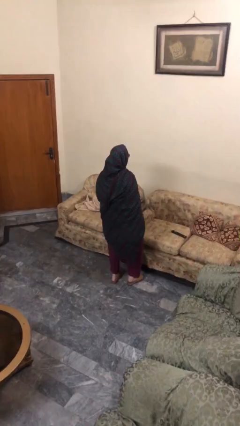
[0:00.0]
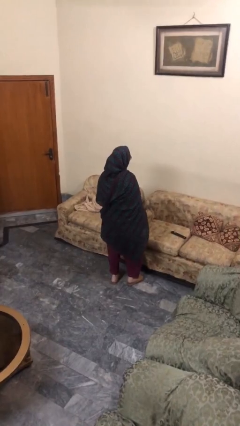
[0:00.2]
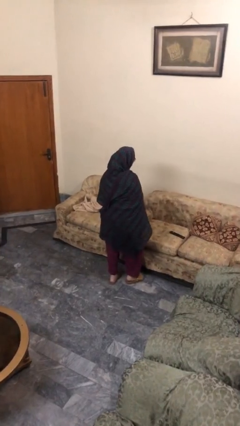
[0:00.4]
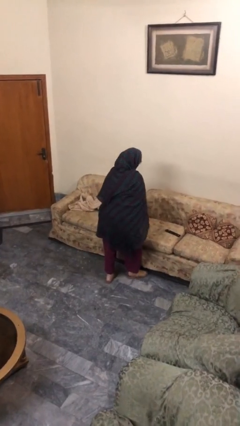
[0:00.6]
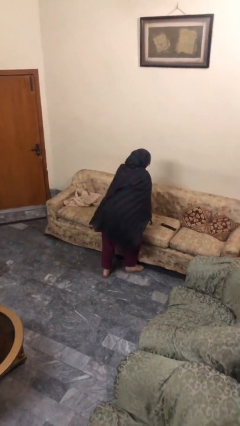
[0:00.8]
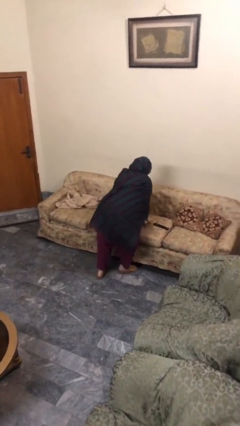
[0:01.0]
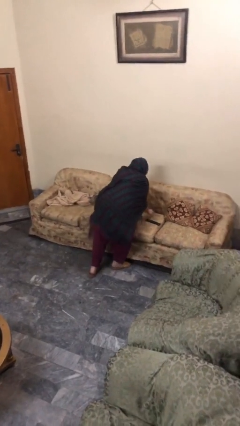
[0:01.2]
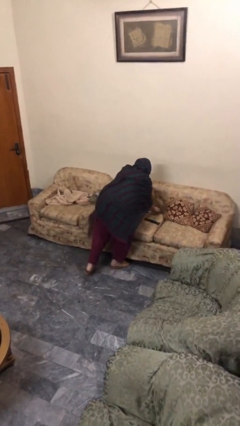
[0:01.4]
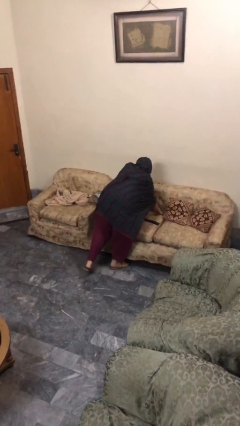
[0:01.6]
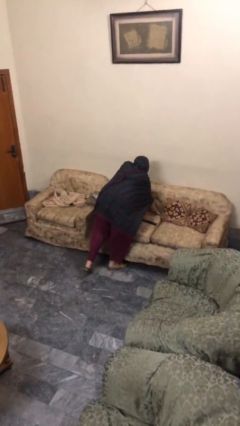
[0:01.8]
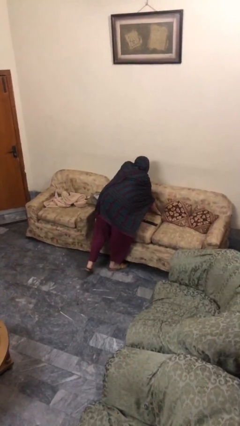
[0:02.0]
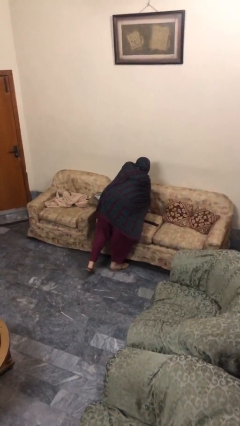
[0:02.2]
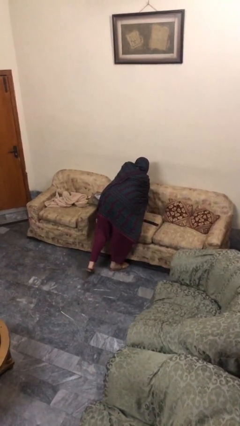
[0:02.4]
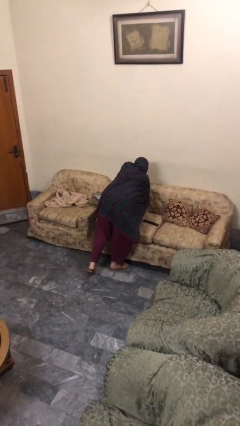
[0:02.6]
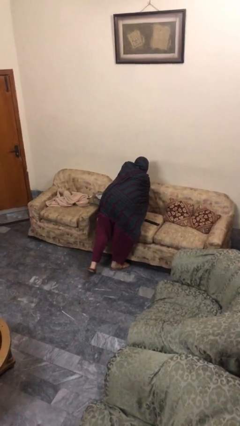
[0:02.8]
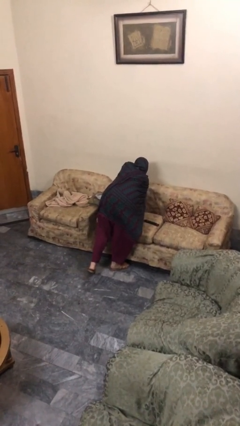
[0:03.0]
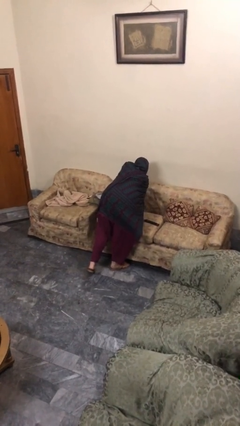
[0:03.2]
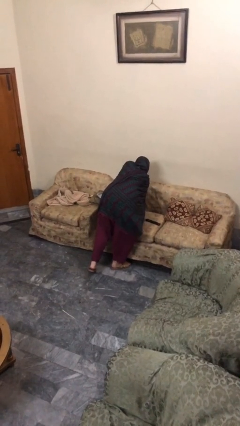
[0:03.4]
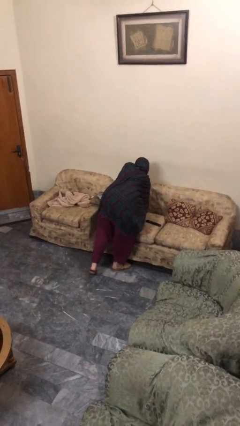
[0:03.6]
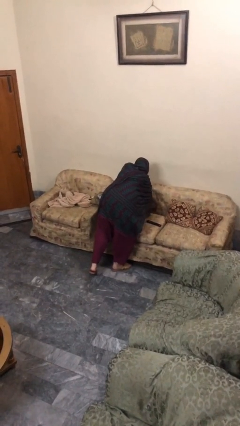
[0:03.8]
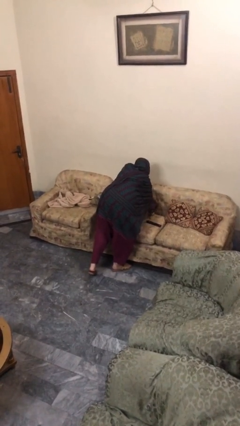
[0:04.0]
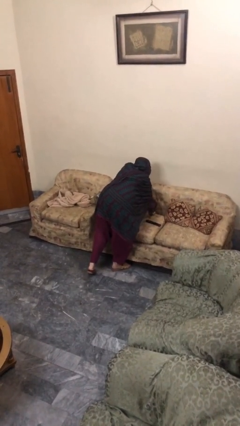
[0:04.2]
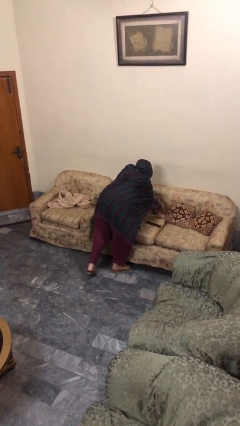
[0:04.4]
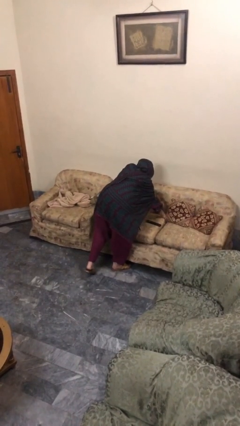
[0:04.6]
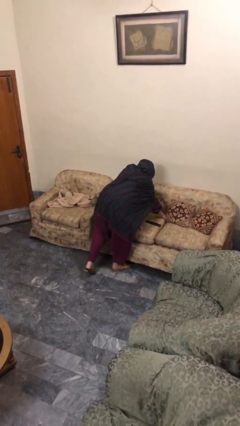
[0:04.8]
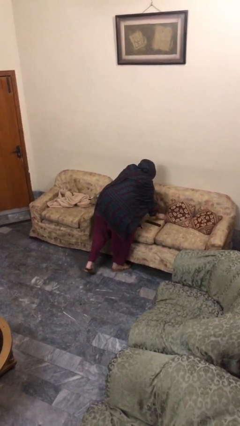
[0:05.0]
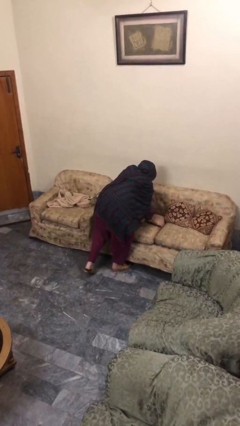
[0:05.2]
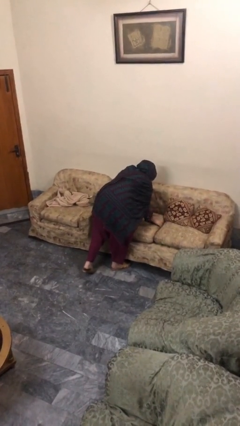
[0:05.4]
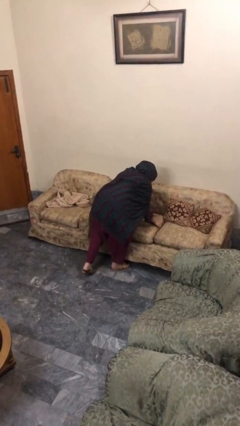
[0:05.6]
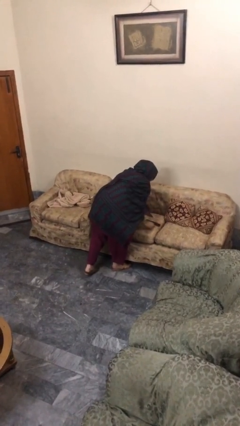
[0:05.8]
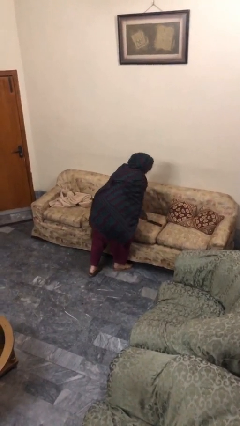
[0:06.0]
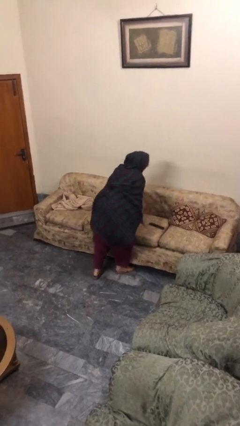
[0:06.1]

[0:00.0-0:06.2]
person searches in couch

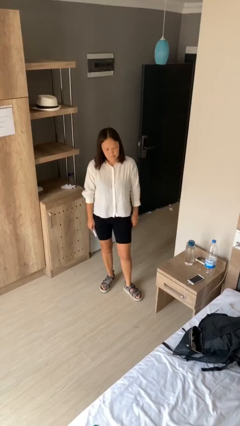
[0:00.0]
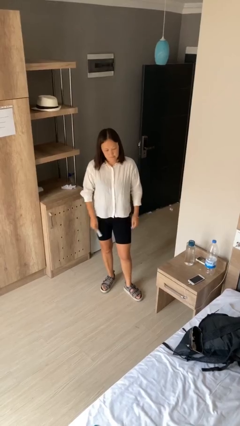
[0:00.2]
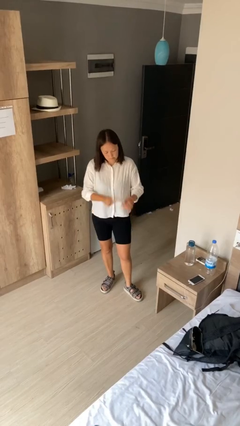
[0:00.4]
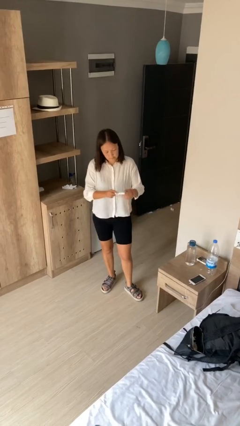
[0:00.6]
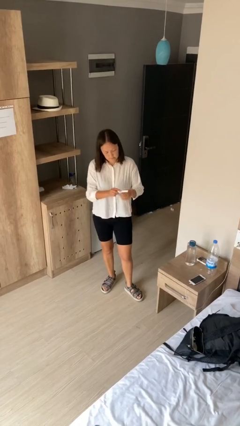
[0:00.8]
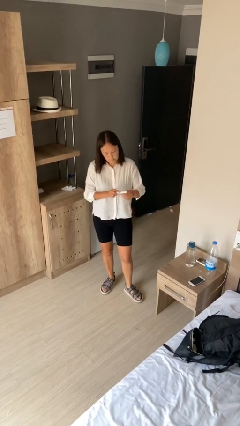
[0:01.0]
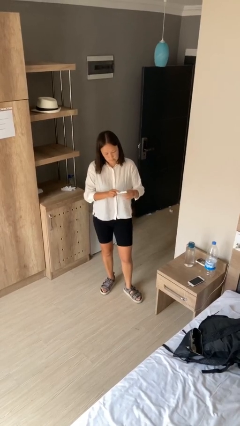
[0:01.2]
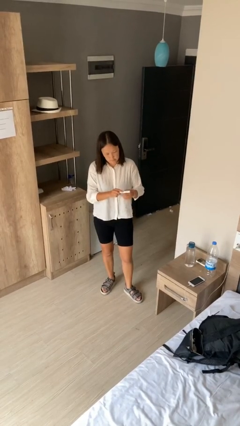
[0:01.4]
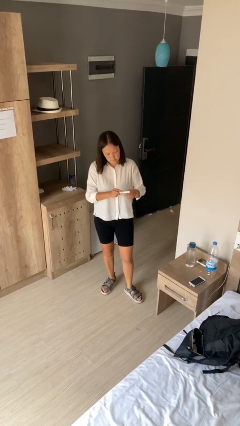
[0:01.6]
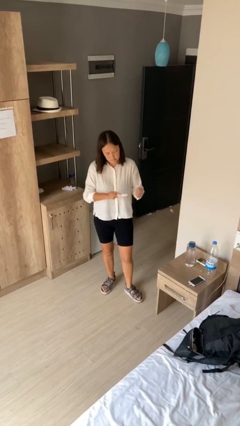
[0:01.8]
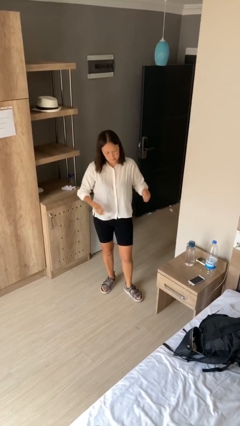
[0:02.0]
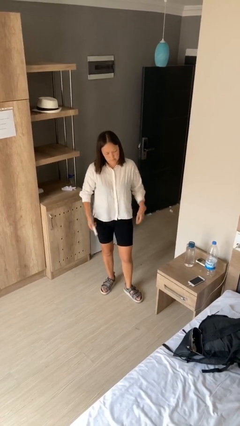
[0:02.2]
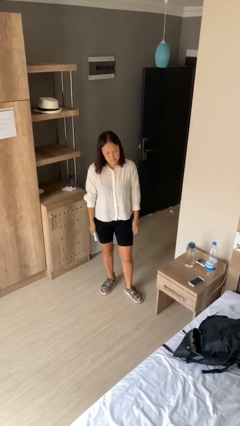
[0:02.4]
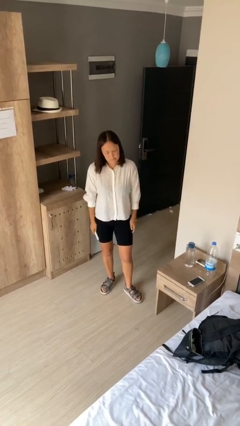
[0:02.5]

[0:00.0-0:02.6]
person files fingernails

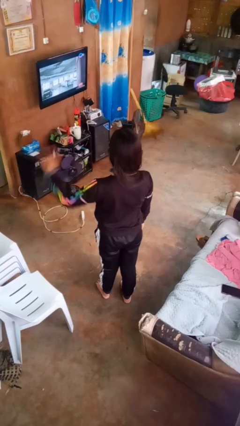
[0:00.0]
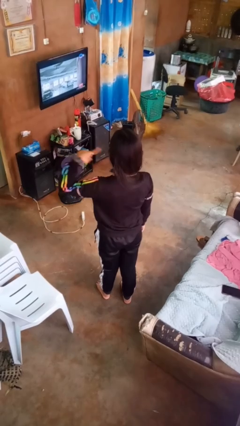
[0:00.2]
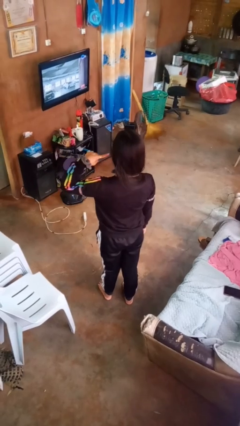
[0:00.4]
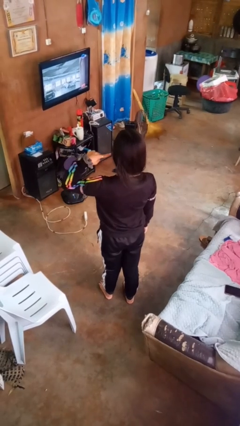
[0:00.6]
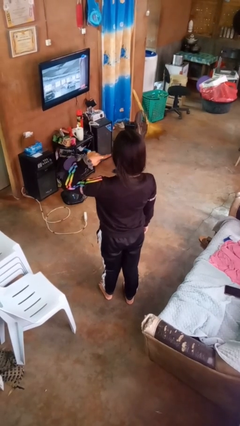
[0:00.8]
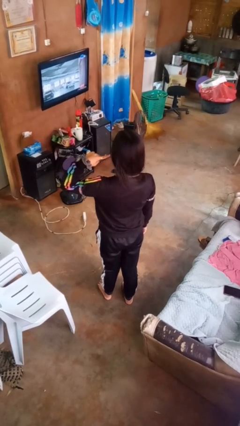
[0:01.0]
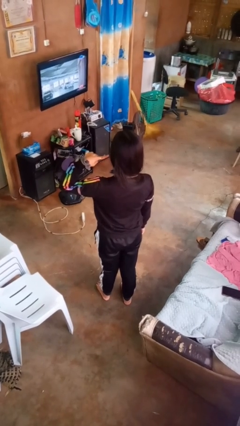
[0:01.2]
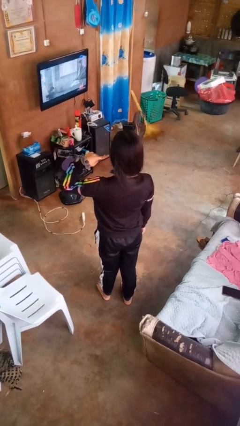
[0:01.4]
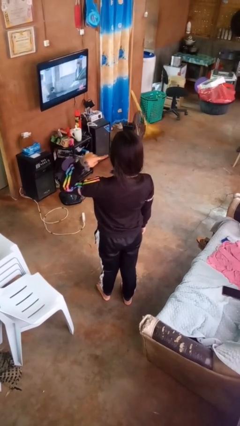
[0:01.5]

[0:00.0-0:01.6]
person gestures listen closely

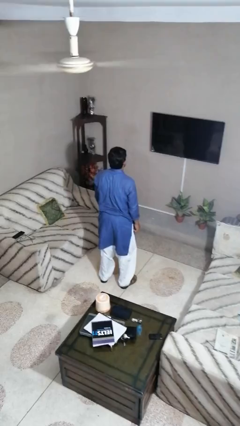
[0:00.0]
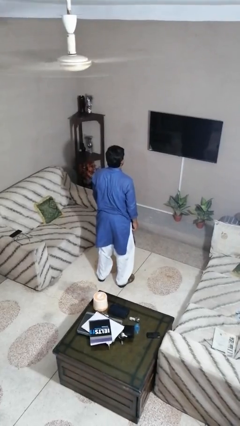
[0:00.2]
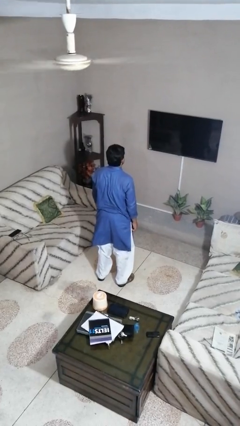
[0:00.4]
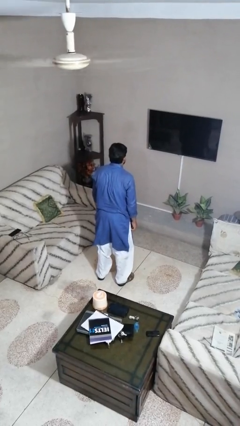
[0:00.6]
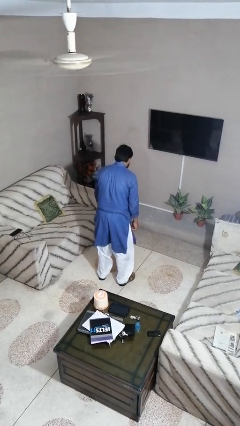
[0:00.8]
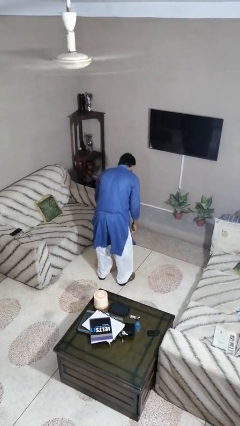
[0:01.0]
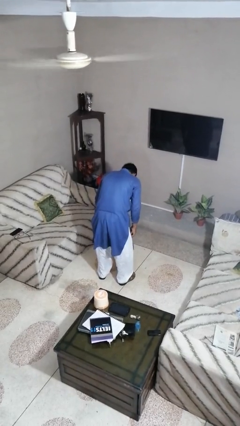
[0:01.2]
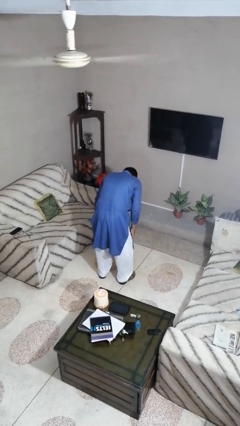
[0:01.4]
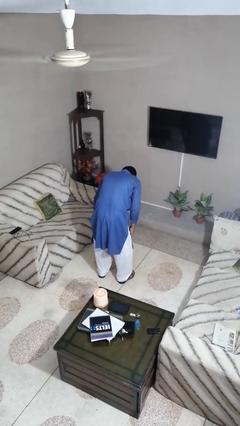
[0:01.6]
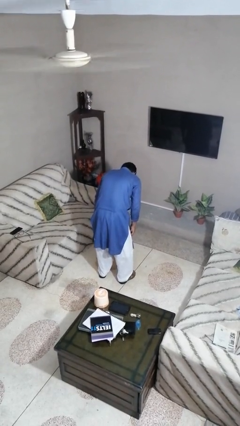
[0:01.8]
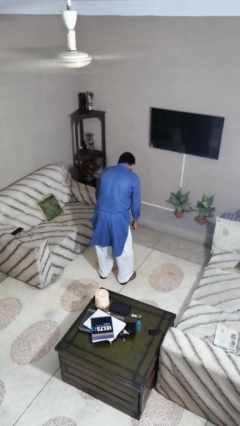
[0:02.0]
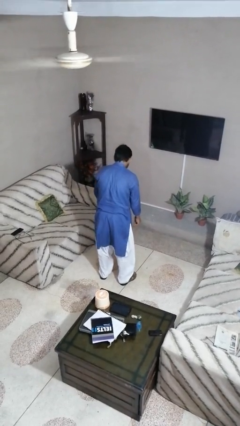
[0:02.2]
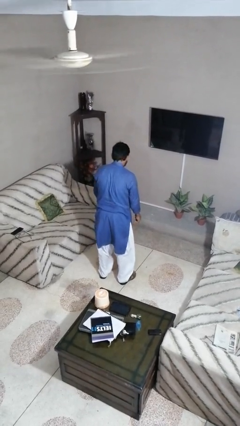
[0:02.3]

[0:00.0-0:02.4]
person bows

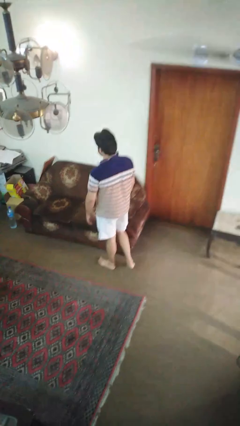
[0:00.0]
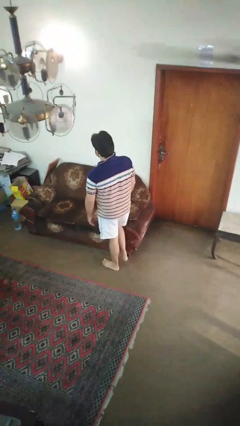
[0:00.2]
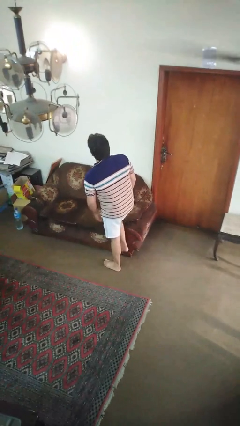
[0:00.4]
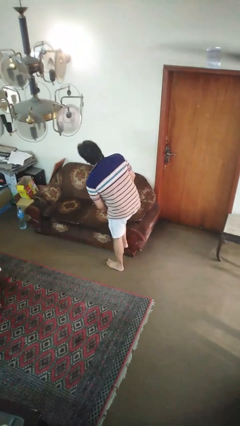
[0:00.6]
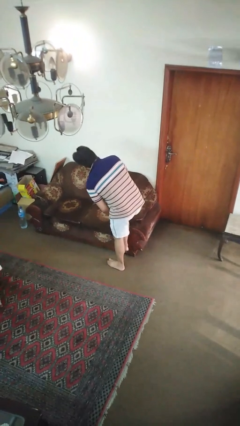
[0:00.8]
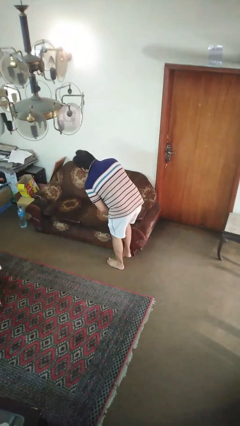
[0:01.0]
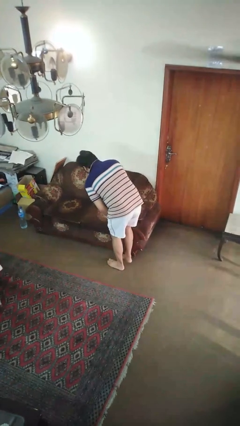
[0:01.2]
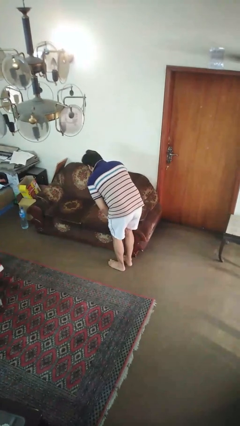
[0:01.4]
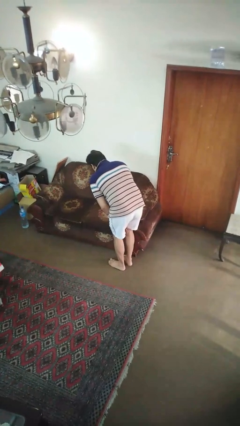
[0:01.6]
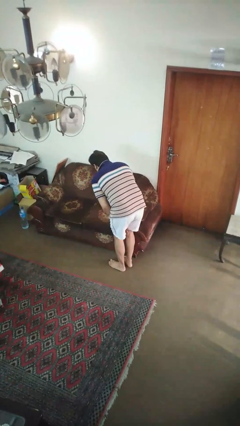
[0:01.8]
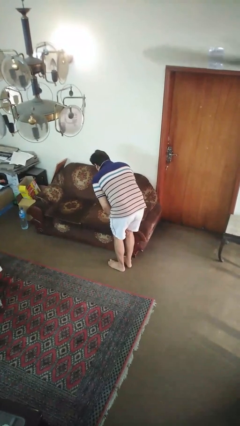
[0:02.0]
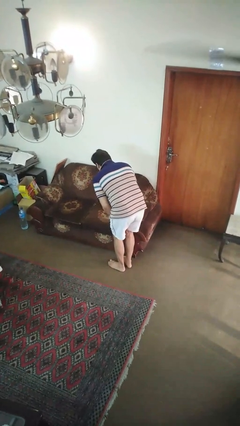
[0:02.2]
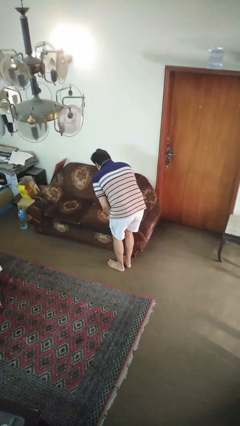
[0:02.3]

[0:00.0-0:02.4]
person stubs toe

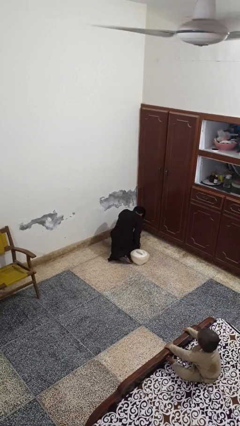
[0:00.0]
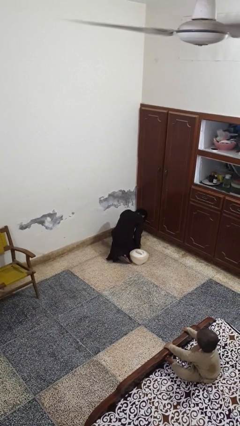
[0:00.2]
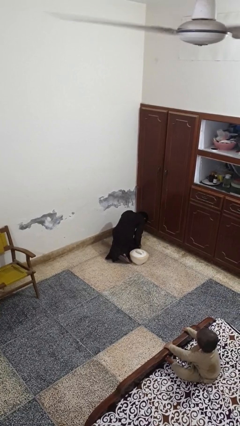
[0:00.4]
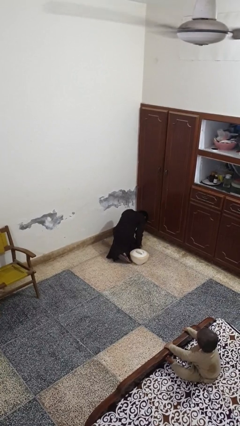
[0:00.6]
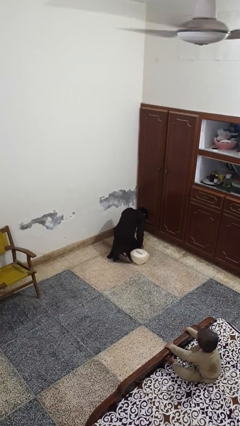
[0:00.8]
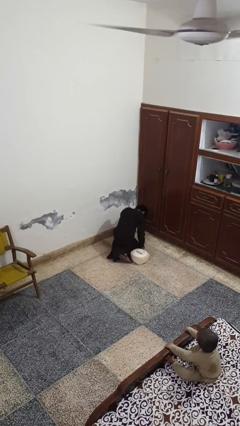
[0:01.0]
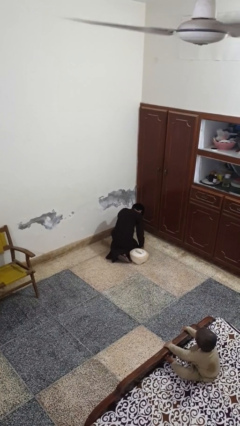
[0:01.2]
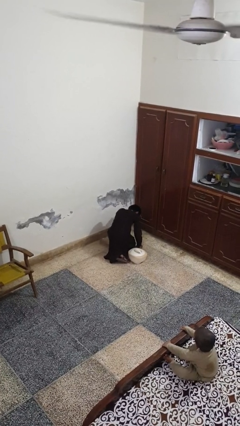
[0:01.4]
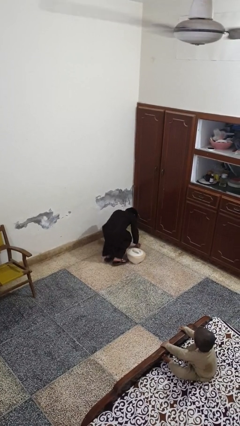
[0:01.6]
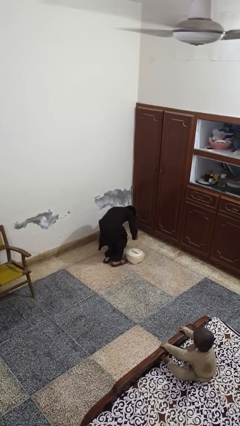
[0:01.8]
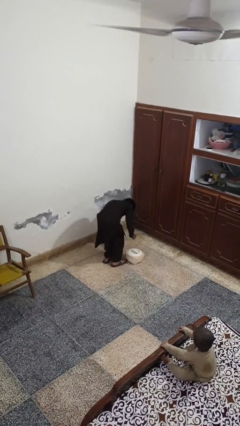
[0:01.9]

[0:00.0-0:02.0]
person lies down on floor
